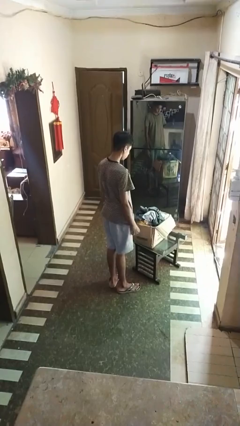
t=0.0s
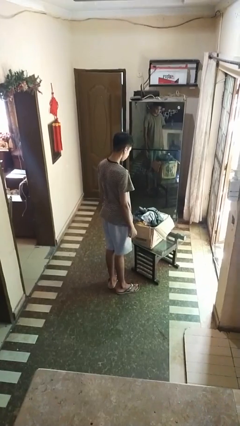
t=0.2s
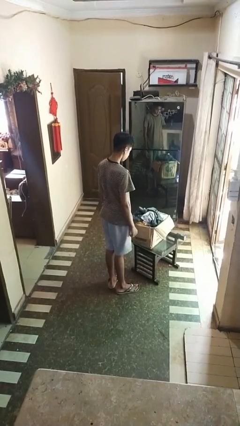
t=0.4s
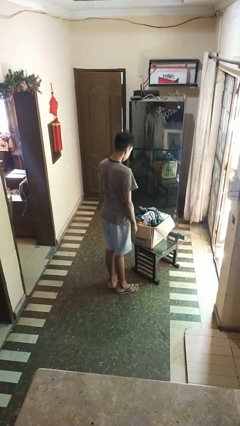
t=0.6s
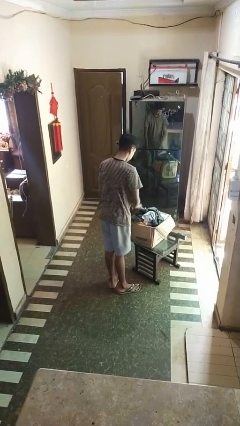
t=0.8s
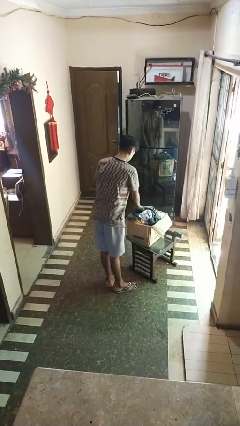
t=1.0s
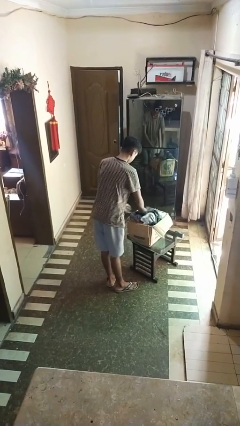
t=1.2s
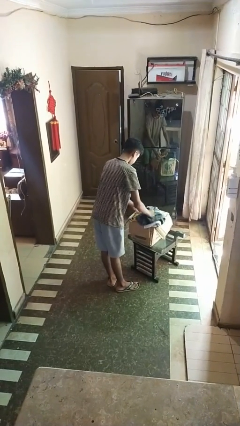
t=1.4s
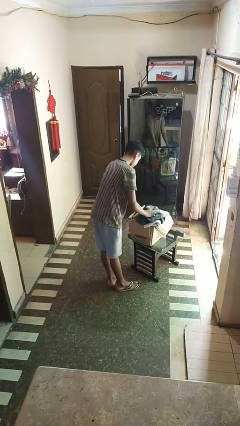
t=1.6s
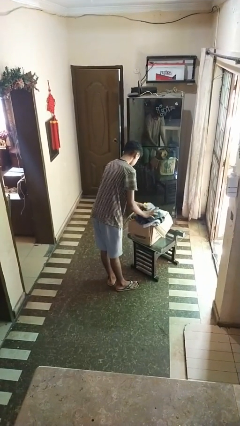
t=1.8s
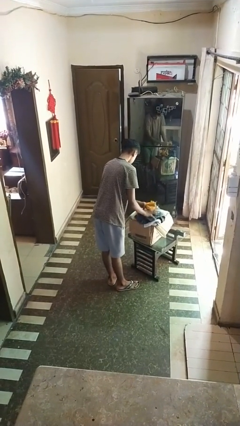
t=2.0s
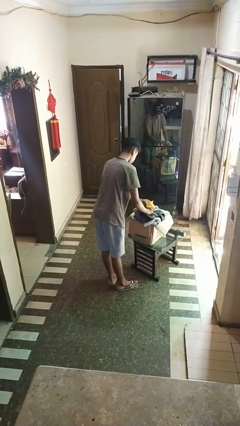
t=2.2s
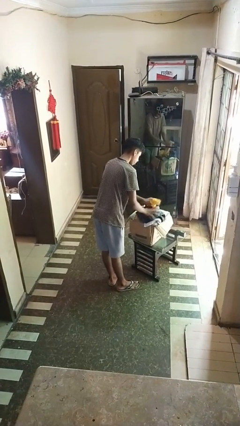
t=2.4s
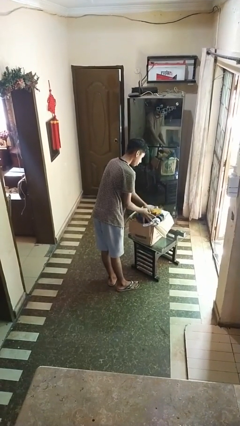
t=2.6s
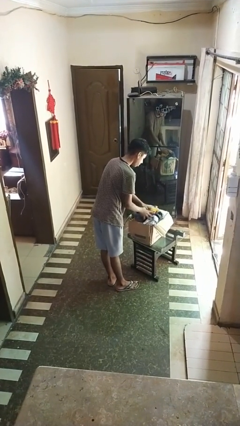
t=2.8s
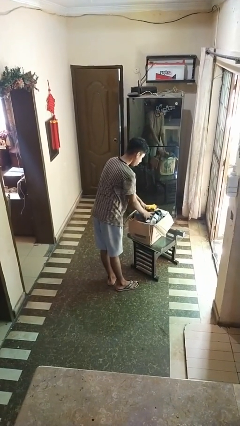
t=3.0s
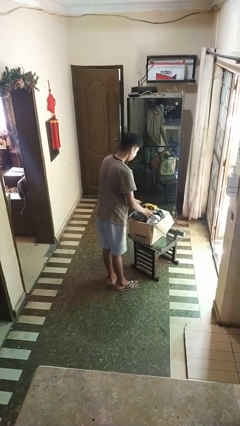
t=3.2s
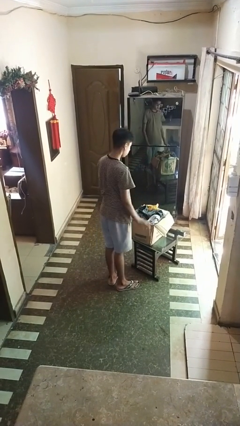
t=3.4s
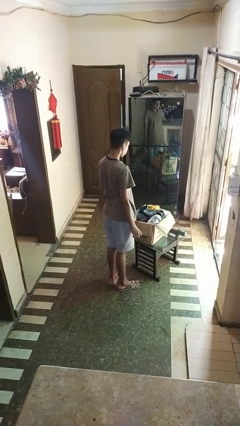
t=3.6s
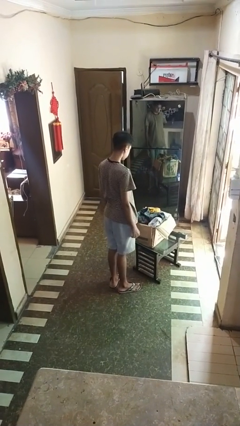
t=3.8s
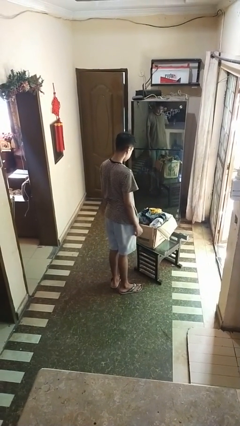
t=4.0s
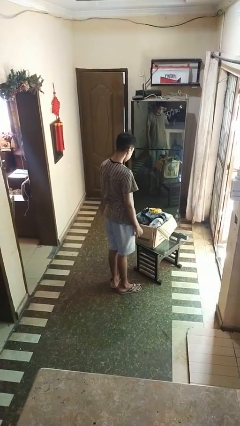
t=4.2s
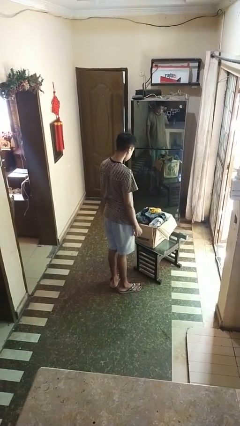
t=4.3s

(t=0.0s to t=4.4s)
person searches in box

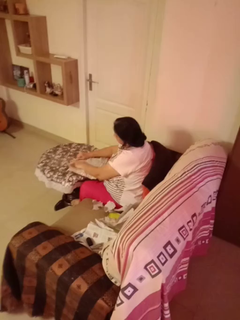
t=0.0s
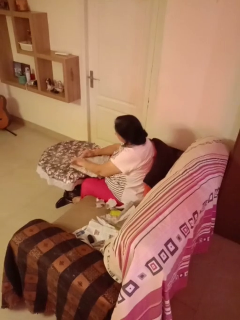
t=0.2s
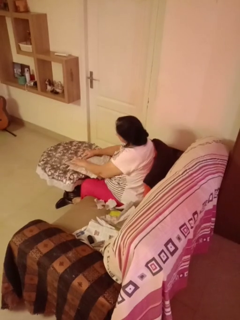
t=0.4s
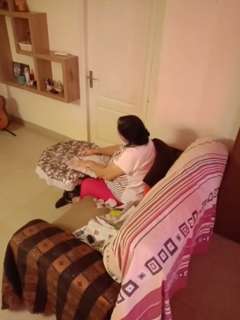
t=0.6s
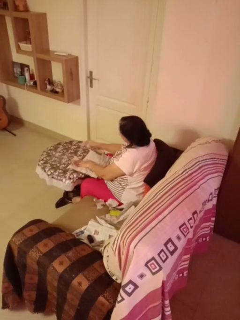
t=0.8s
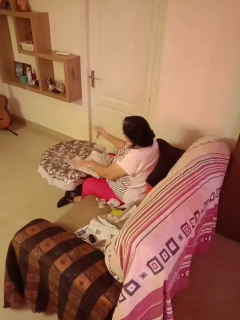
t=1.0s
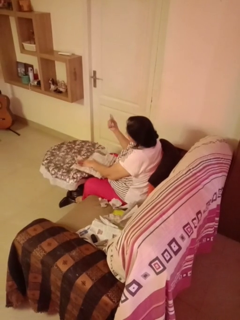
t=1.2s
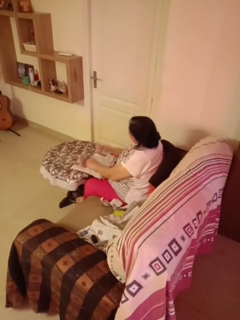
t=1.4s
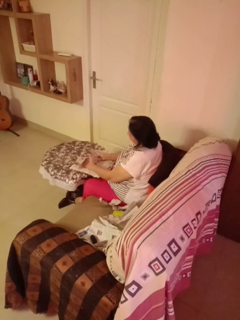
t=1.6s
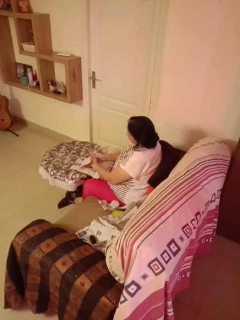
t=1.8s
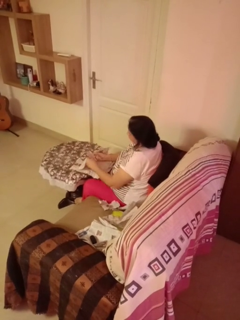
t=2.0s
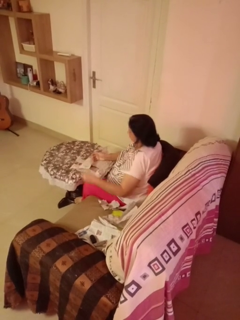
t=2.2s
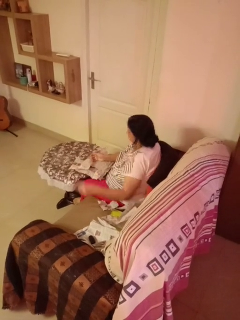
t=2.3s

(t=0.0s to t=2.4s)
person tears paper

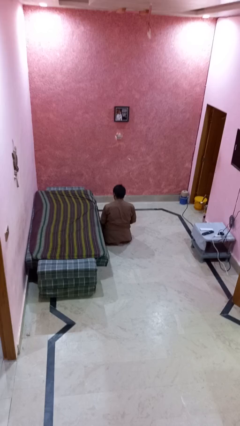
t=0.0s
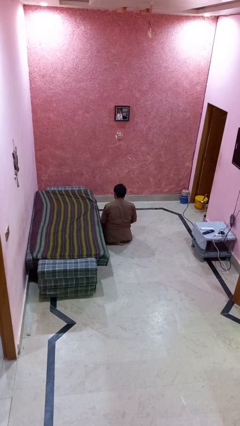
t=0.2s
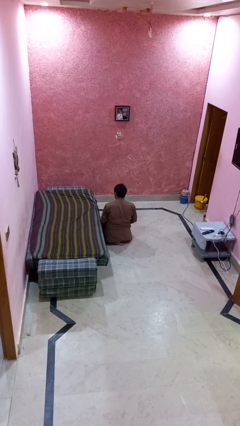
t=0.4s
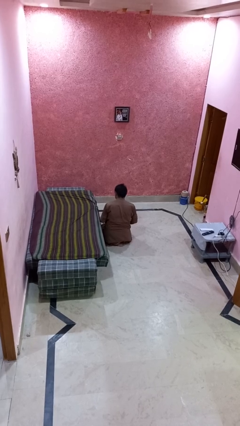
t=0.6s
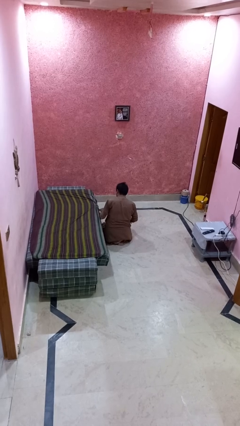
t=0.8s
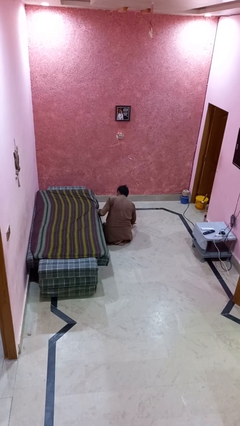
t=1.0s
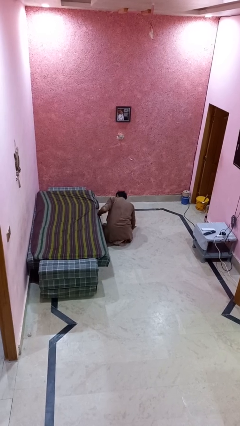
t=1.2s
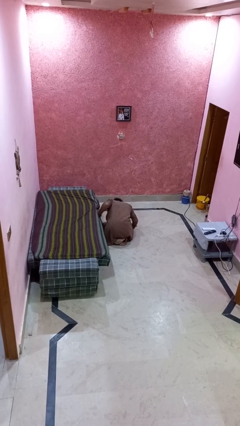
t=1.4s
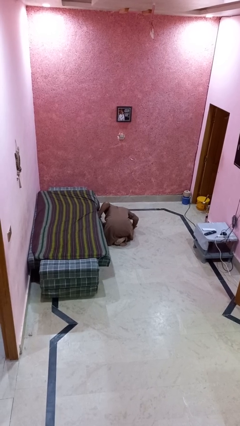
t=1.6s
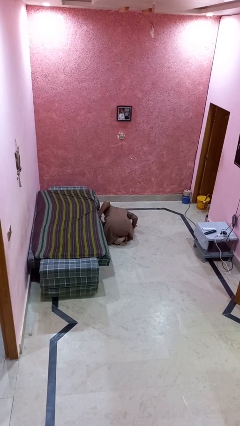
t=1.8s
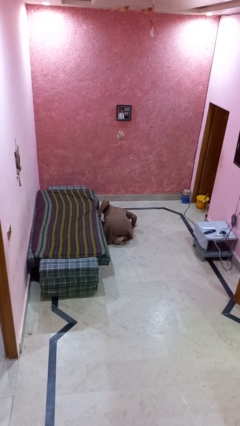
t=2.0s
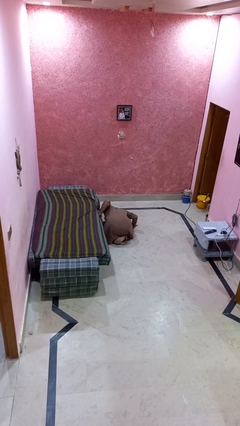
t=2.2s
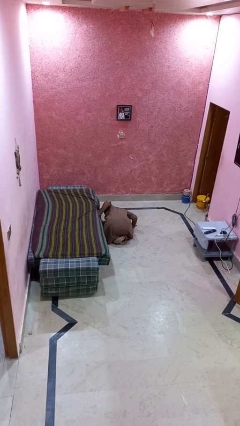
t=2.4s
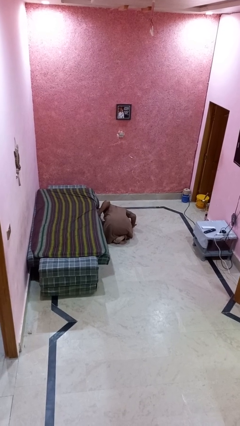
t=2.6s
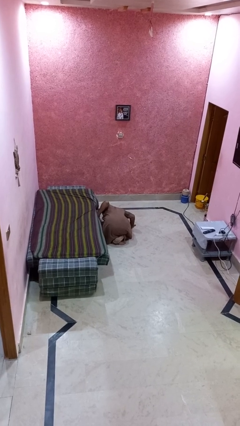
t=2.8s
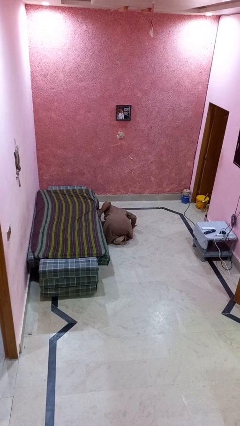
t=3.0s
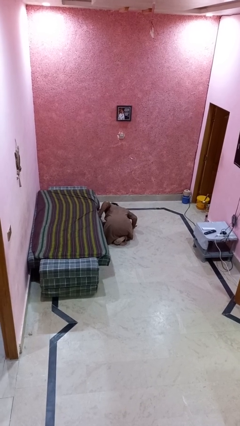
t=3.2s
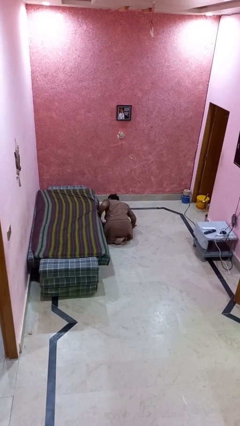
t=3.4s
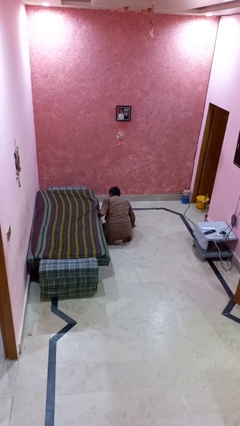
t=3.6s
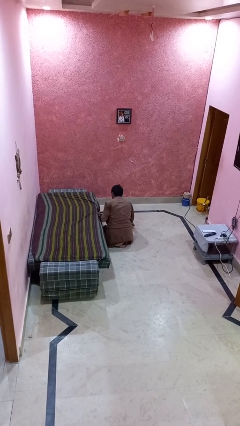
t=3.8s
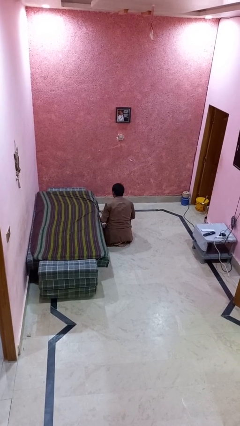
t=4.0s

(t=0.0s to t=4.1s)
person searches under bed

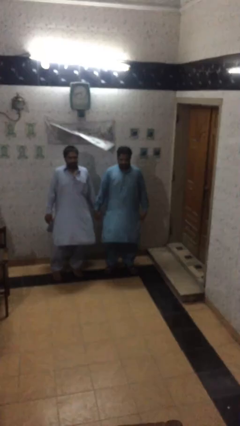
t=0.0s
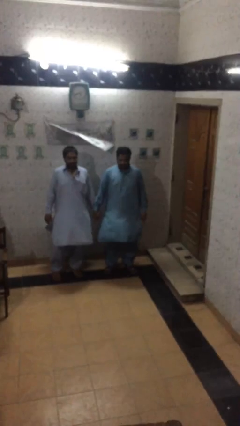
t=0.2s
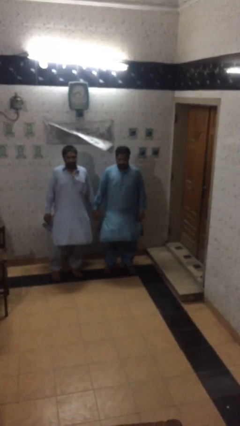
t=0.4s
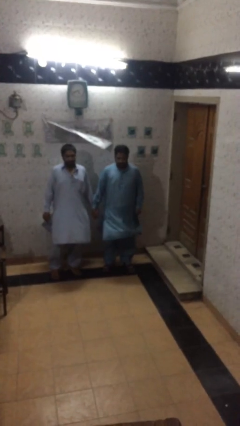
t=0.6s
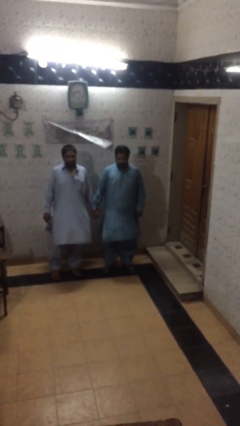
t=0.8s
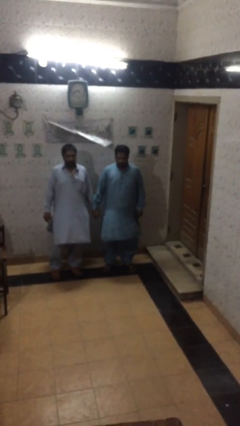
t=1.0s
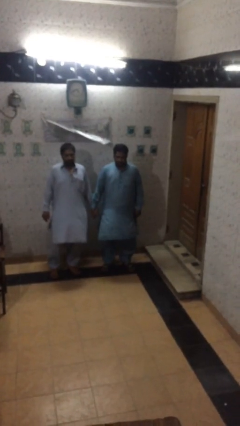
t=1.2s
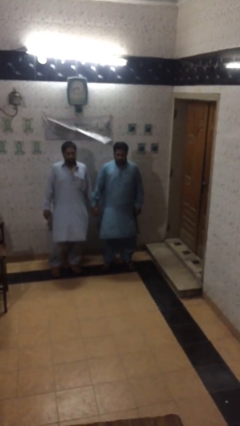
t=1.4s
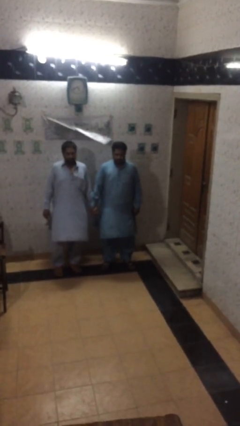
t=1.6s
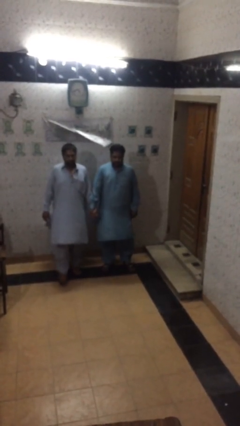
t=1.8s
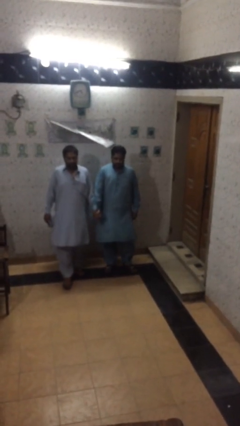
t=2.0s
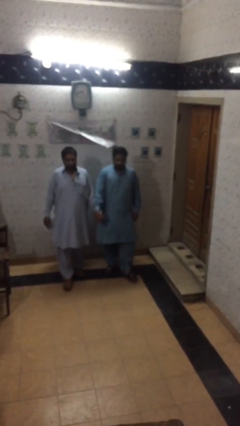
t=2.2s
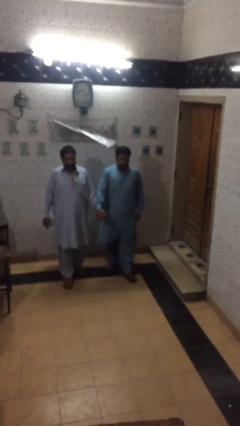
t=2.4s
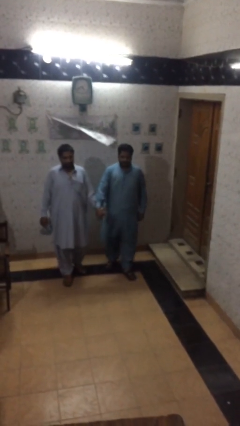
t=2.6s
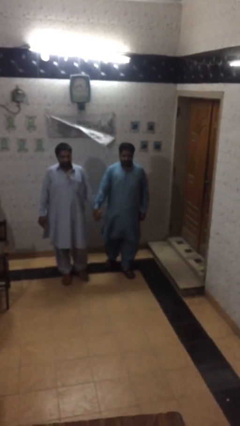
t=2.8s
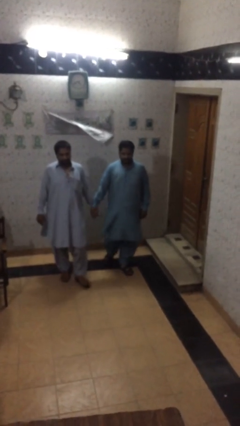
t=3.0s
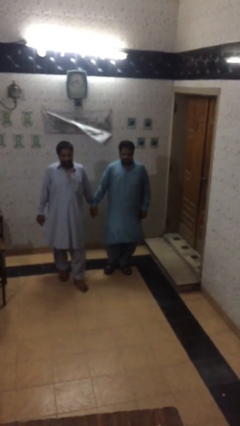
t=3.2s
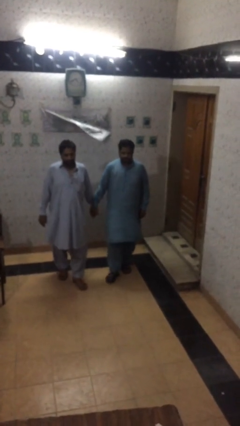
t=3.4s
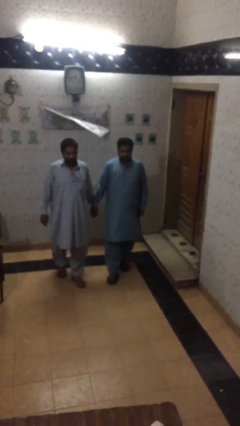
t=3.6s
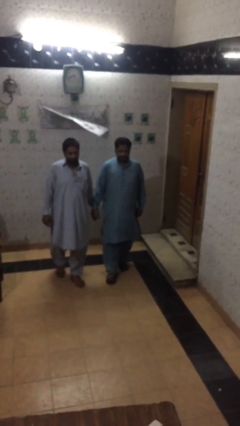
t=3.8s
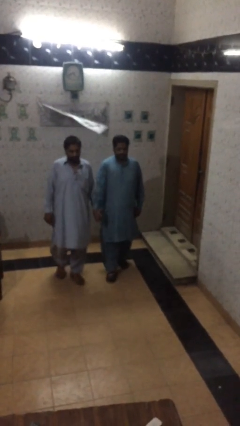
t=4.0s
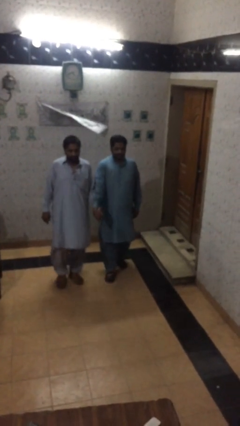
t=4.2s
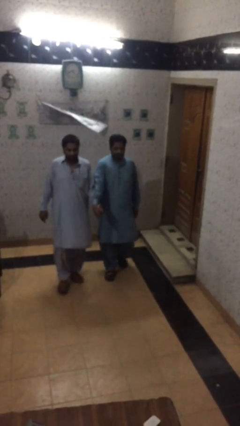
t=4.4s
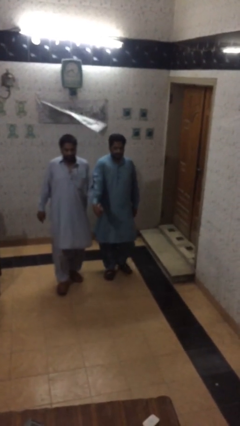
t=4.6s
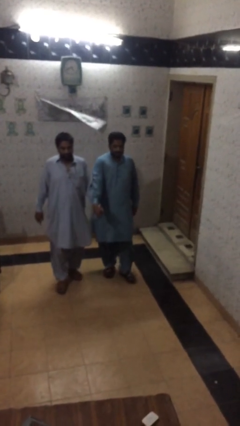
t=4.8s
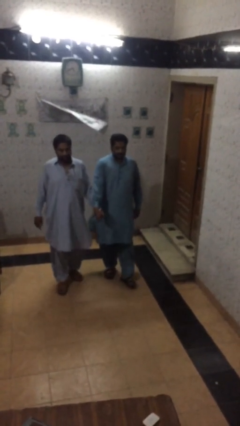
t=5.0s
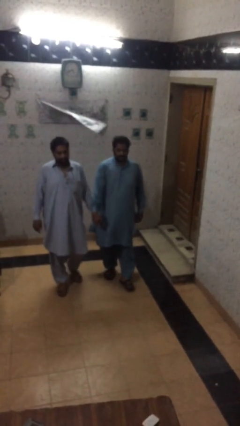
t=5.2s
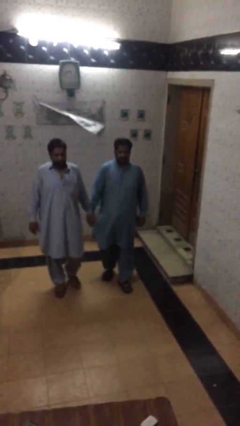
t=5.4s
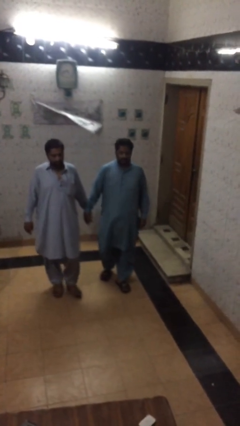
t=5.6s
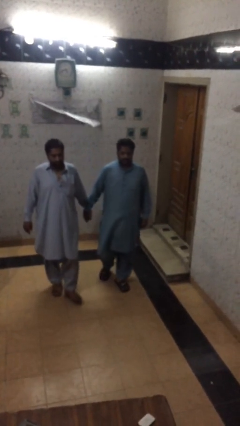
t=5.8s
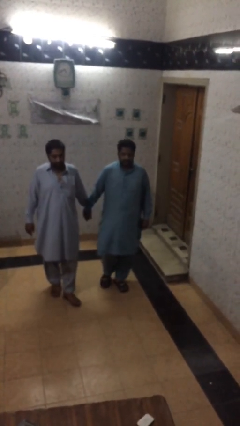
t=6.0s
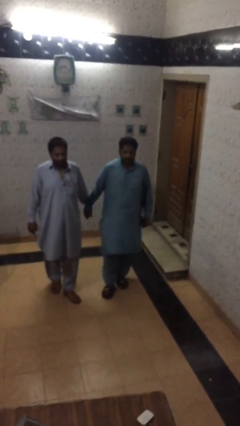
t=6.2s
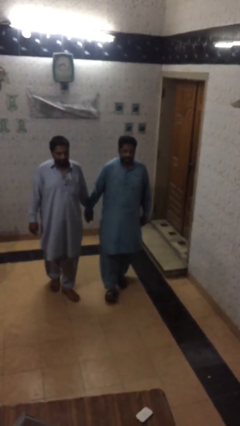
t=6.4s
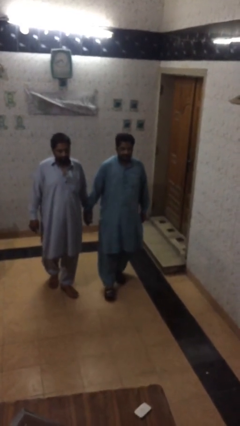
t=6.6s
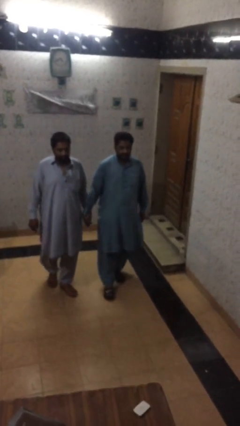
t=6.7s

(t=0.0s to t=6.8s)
person holds hand

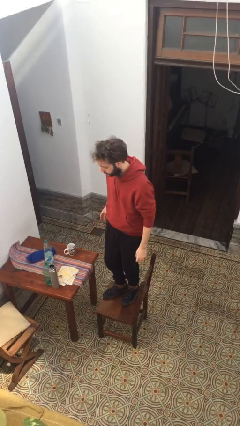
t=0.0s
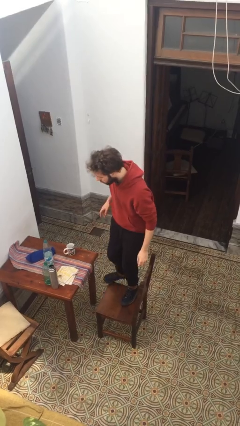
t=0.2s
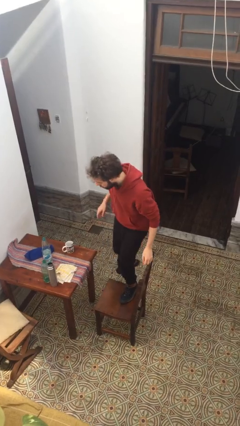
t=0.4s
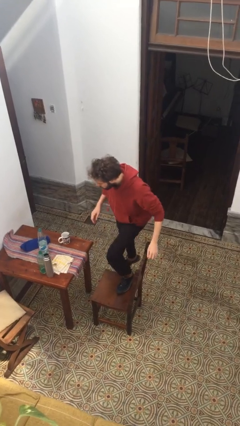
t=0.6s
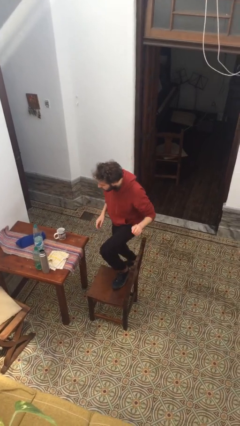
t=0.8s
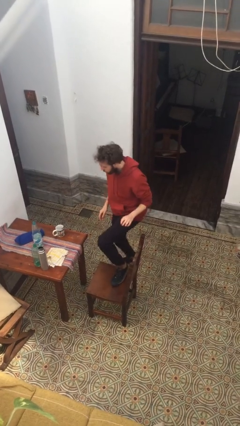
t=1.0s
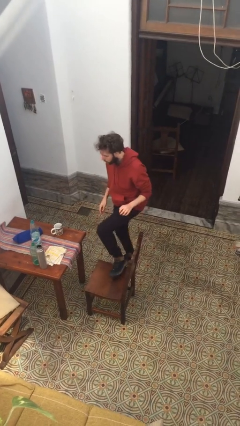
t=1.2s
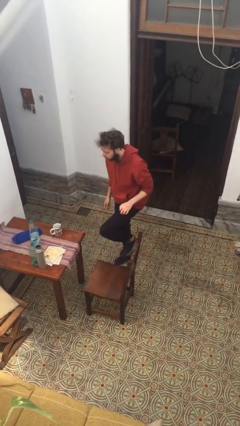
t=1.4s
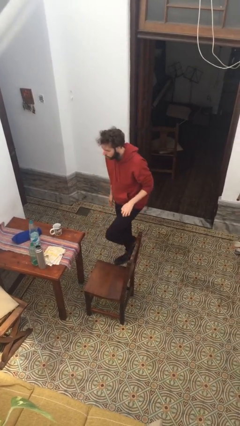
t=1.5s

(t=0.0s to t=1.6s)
person climbs off chair
